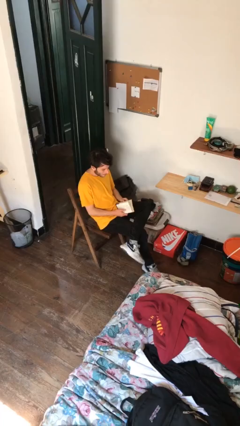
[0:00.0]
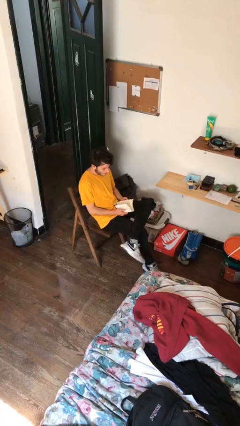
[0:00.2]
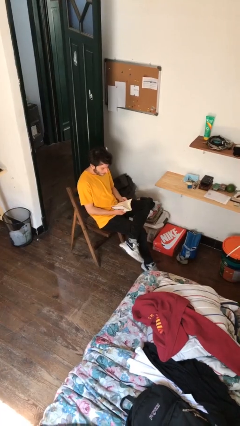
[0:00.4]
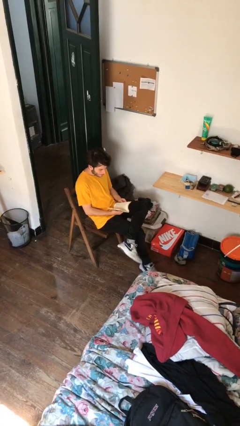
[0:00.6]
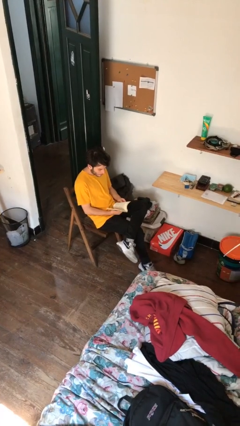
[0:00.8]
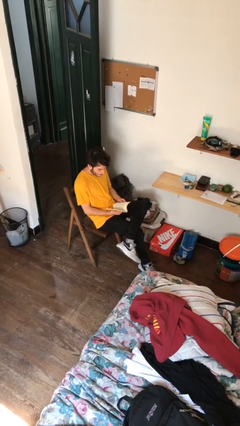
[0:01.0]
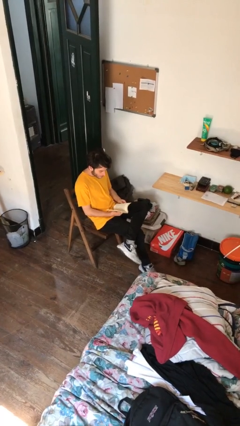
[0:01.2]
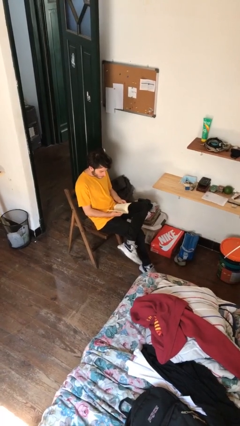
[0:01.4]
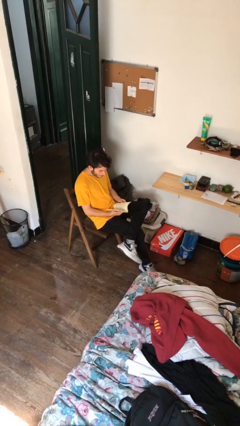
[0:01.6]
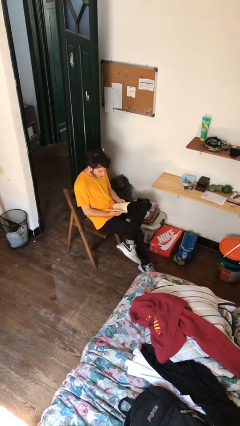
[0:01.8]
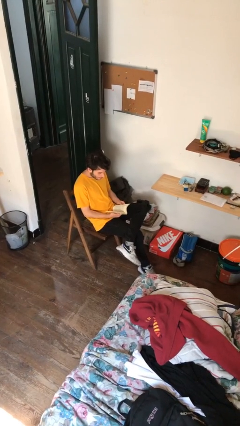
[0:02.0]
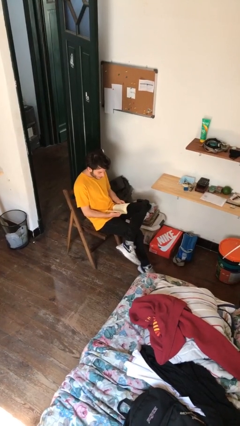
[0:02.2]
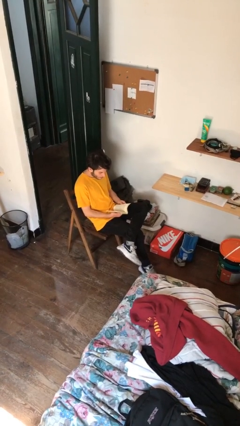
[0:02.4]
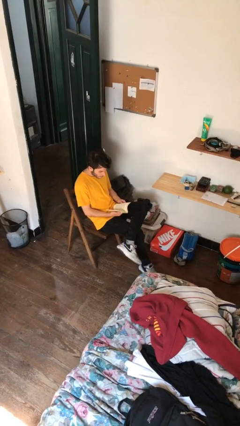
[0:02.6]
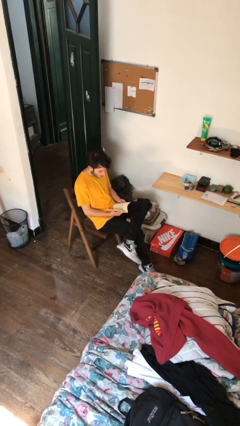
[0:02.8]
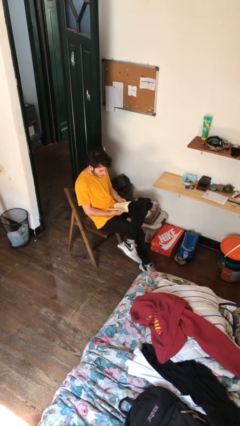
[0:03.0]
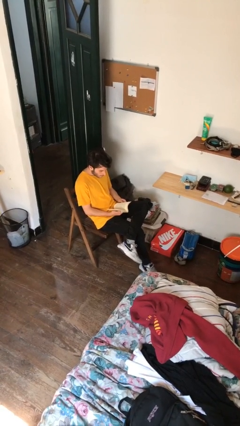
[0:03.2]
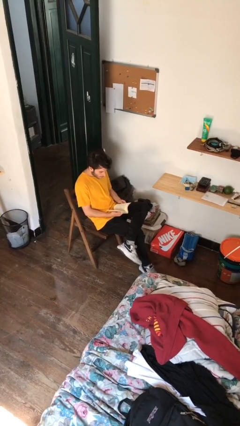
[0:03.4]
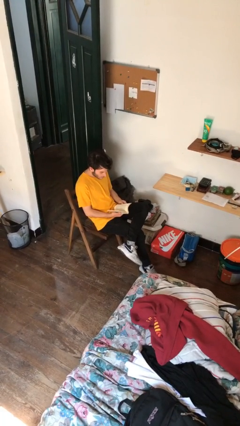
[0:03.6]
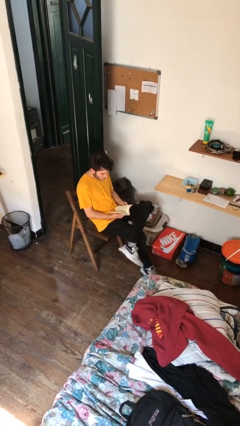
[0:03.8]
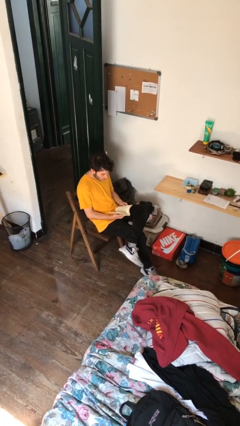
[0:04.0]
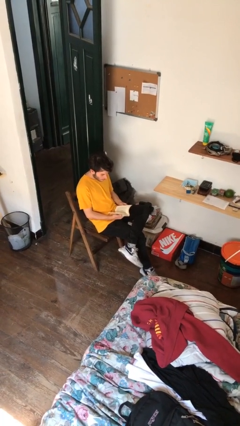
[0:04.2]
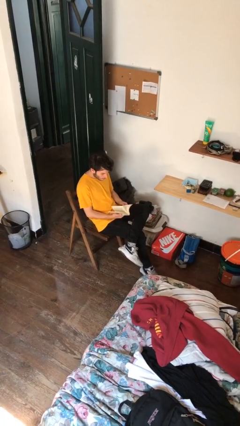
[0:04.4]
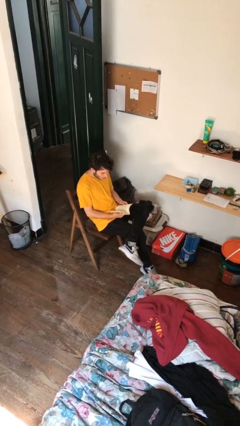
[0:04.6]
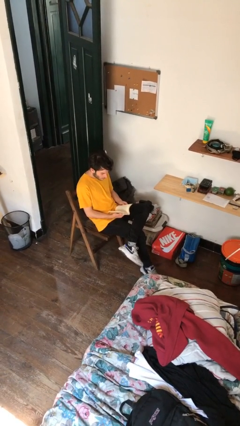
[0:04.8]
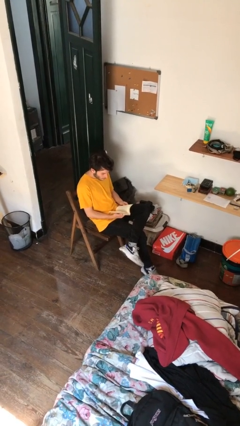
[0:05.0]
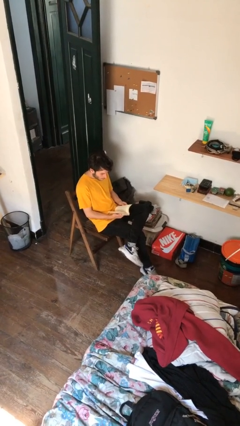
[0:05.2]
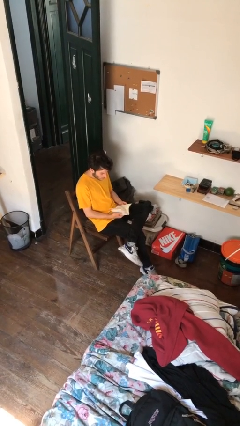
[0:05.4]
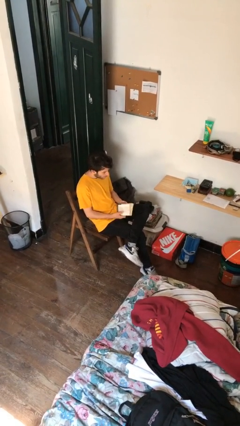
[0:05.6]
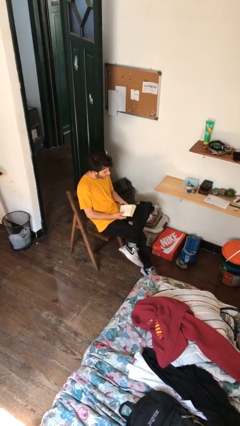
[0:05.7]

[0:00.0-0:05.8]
person reads document

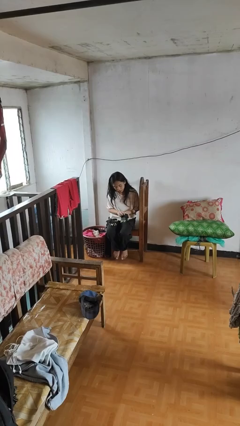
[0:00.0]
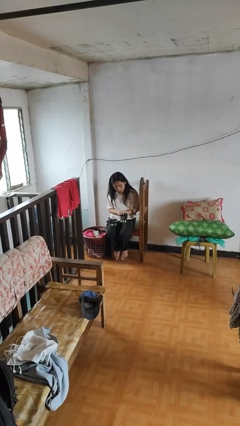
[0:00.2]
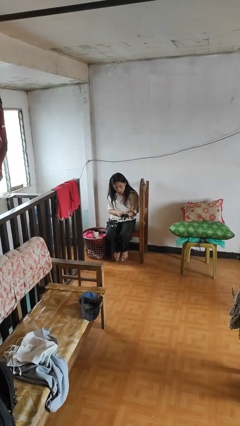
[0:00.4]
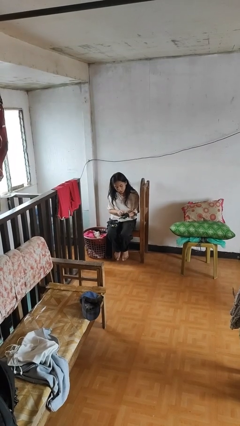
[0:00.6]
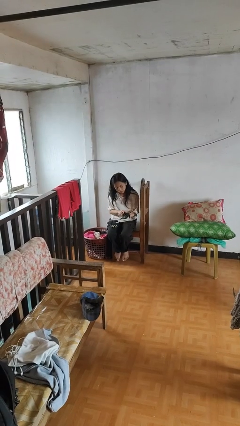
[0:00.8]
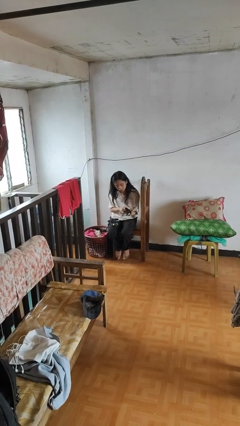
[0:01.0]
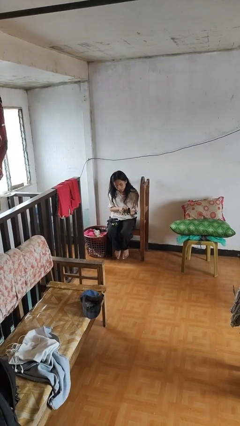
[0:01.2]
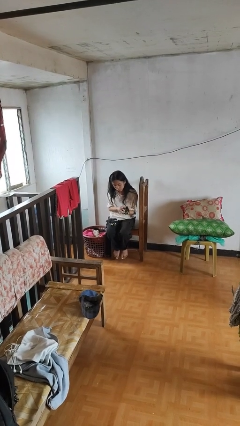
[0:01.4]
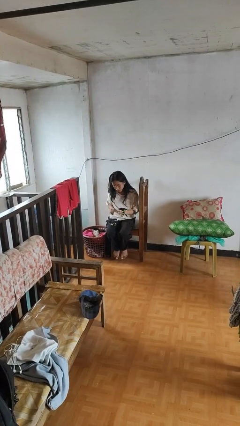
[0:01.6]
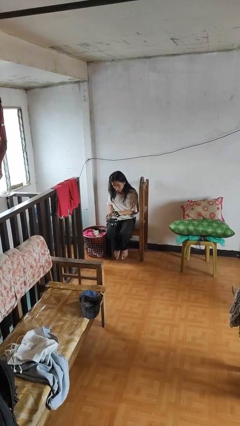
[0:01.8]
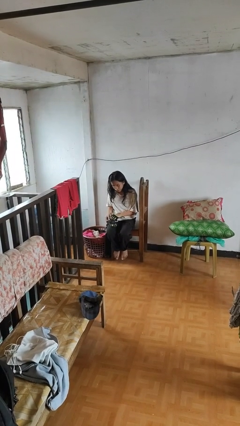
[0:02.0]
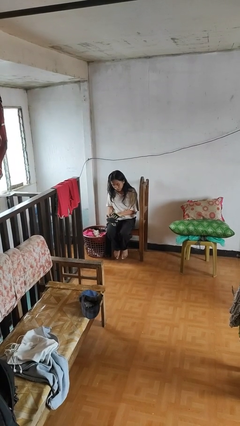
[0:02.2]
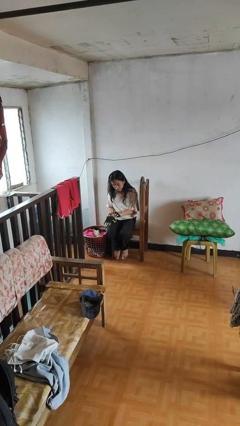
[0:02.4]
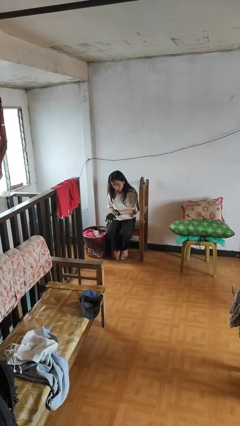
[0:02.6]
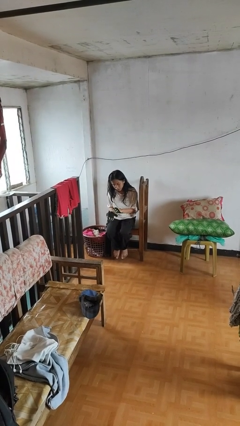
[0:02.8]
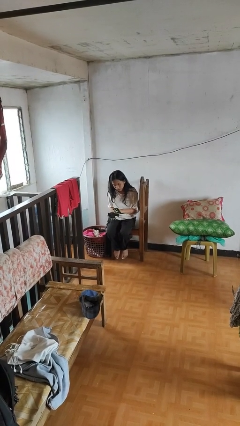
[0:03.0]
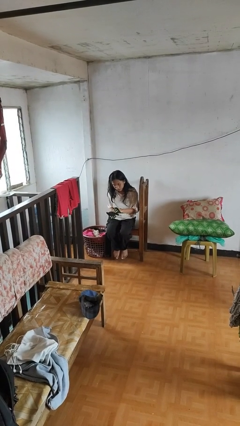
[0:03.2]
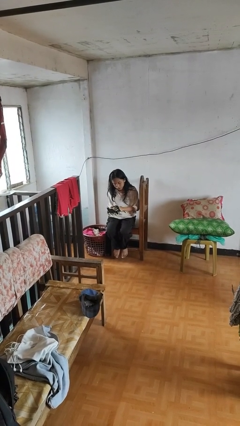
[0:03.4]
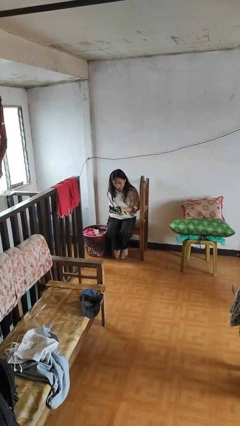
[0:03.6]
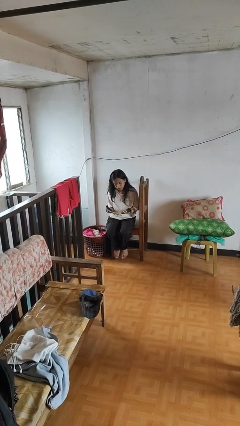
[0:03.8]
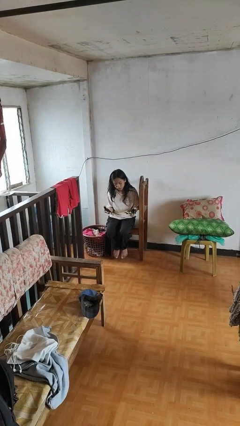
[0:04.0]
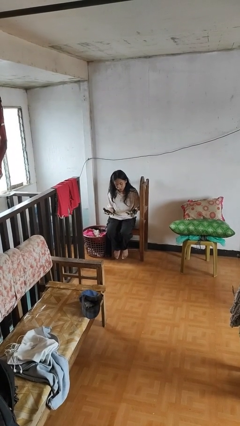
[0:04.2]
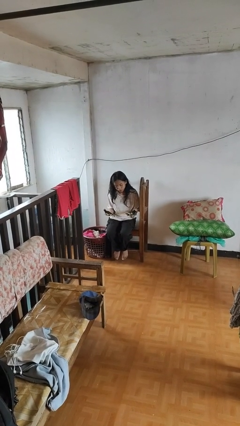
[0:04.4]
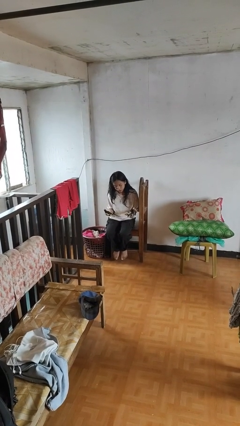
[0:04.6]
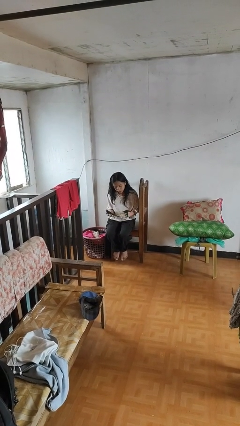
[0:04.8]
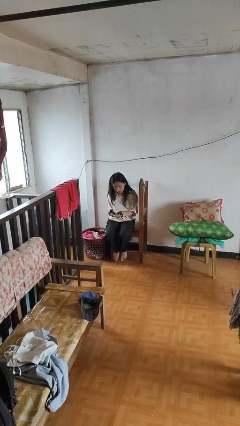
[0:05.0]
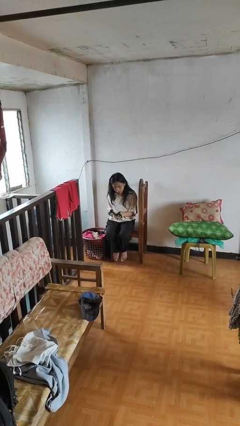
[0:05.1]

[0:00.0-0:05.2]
person puts on gloves

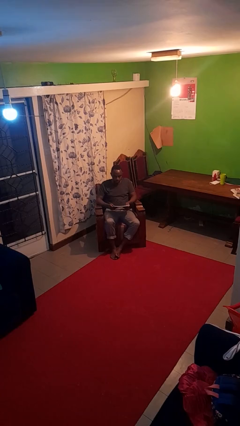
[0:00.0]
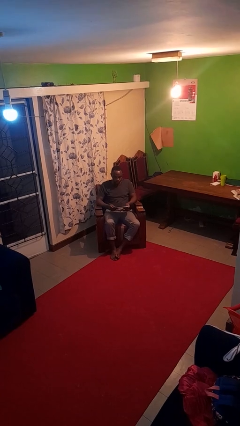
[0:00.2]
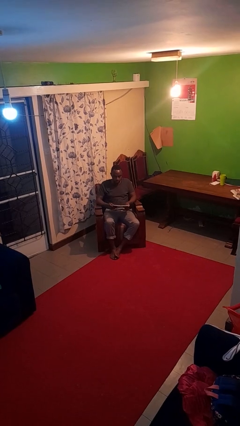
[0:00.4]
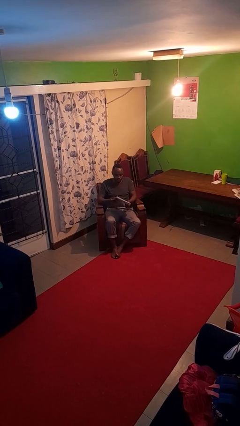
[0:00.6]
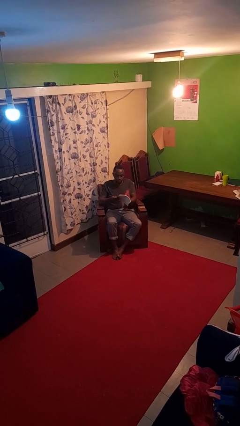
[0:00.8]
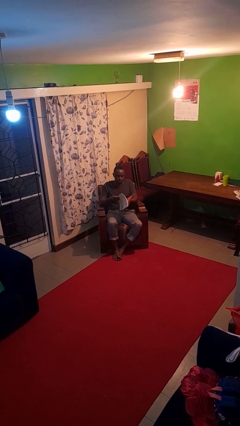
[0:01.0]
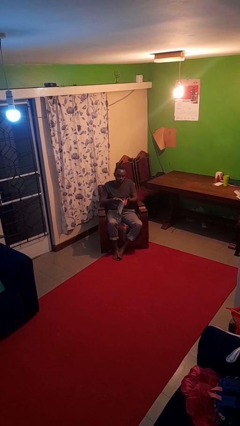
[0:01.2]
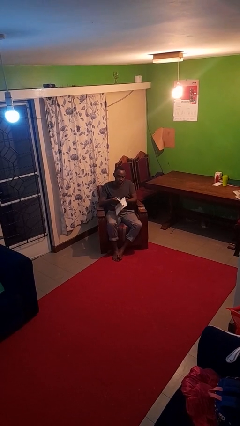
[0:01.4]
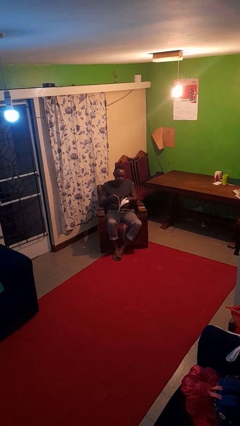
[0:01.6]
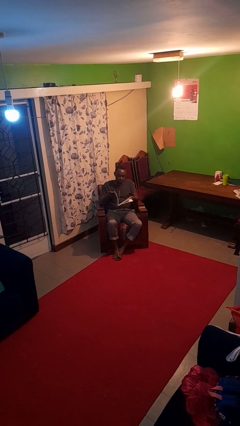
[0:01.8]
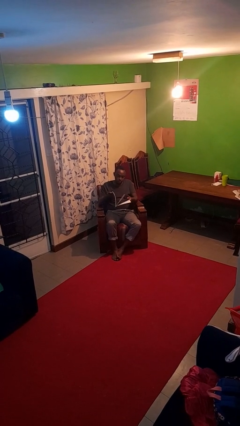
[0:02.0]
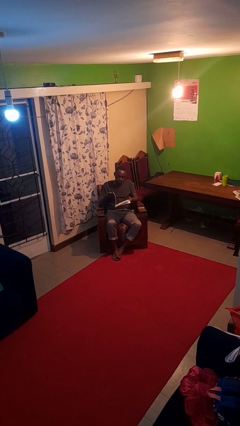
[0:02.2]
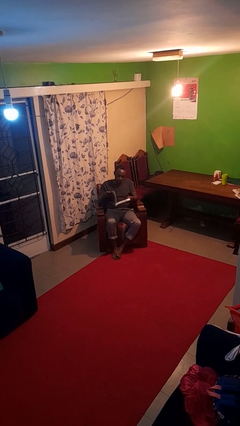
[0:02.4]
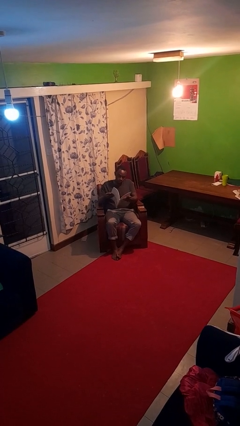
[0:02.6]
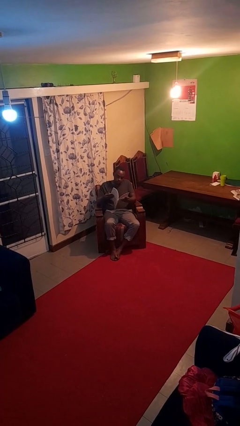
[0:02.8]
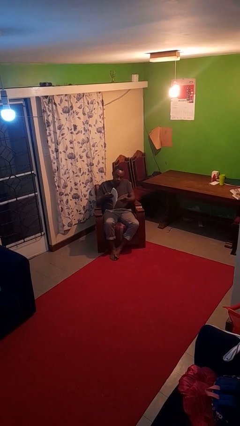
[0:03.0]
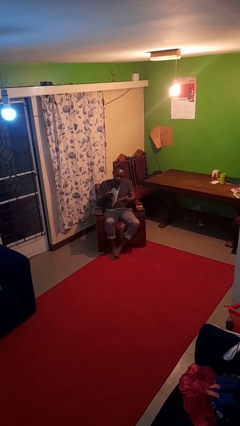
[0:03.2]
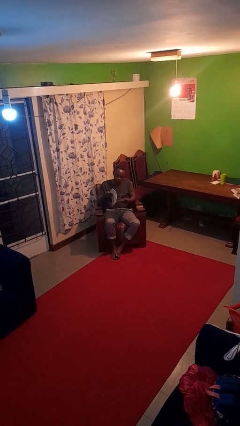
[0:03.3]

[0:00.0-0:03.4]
person reads magazine

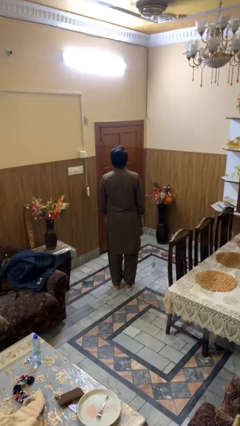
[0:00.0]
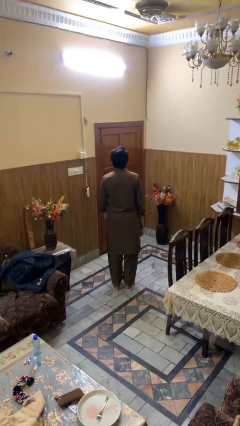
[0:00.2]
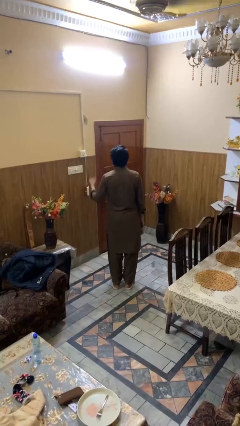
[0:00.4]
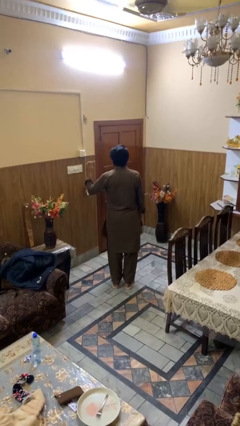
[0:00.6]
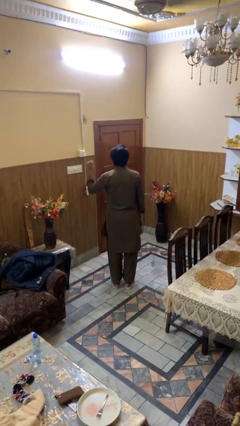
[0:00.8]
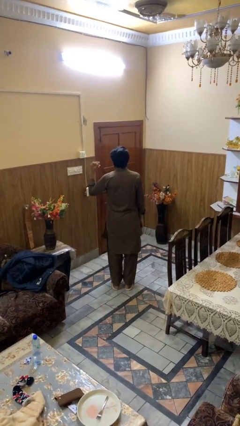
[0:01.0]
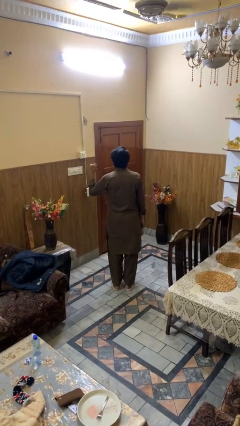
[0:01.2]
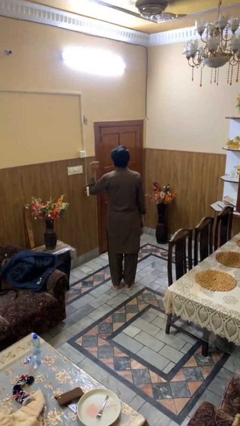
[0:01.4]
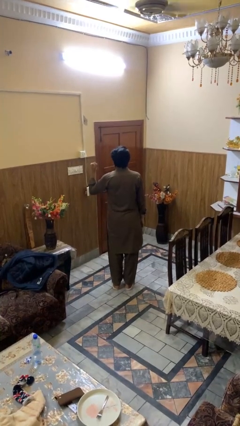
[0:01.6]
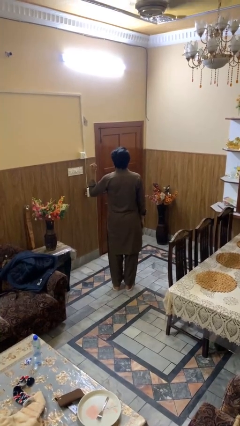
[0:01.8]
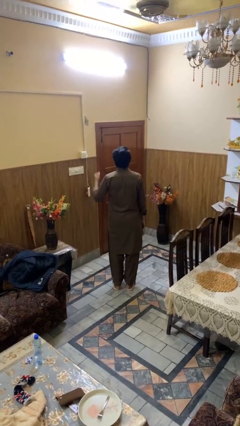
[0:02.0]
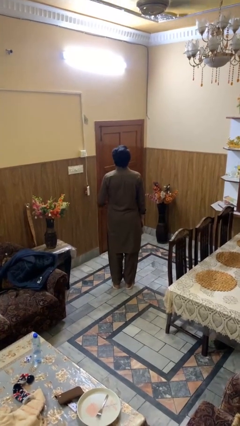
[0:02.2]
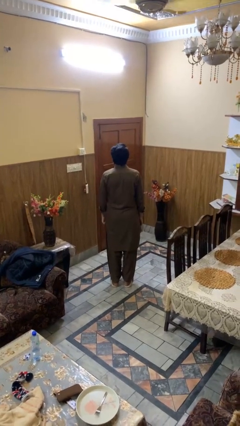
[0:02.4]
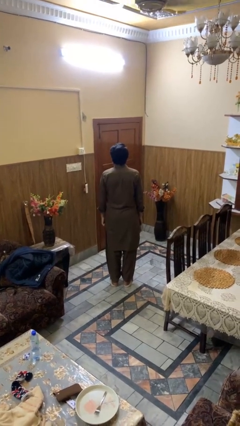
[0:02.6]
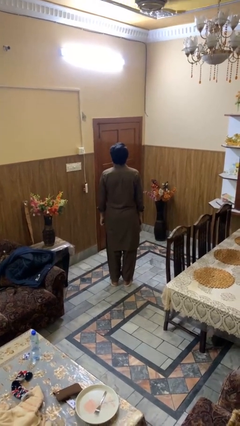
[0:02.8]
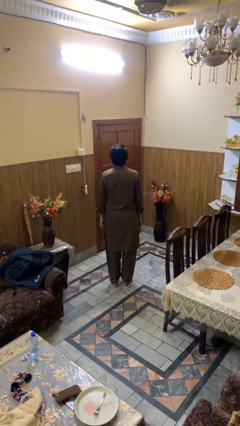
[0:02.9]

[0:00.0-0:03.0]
person snaps fingers

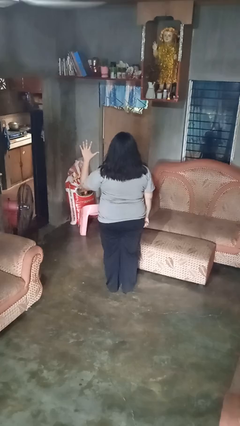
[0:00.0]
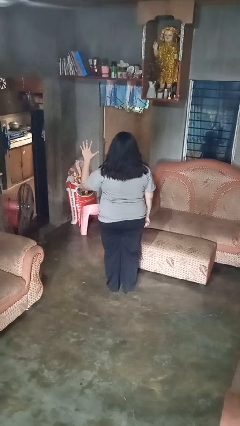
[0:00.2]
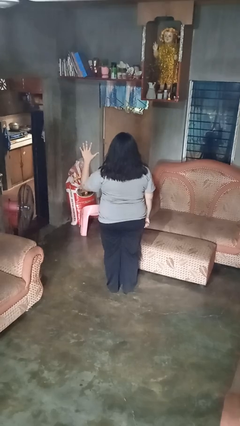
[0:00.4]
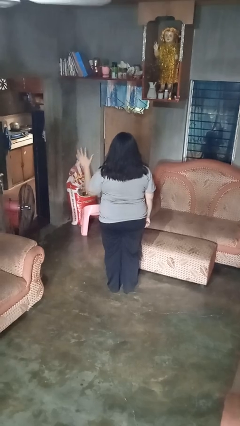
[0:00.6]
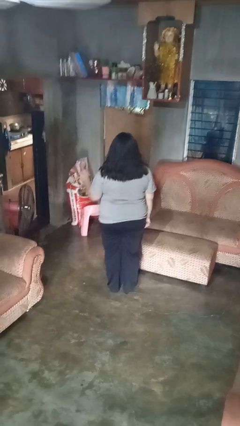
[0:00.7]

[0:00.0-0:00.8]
person gestures number five
